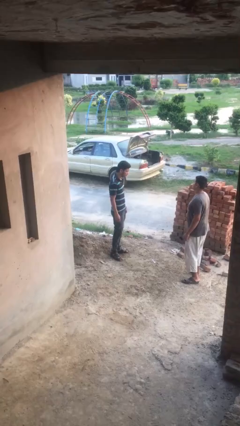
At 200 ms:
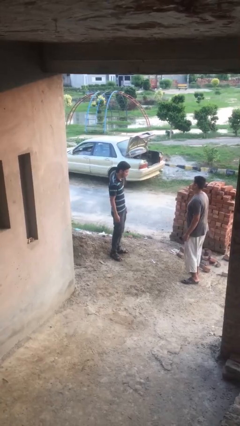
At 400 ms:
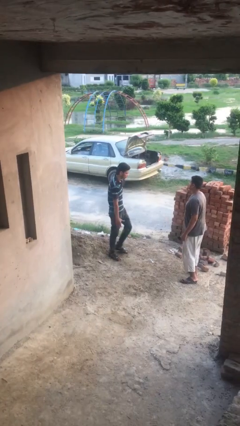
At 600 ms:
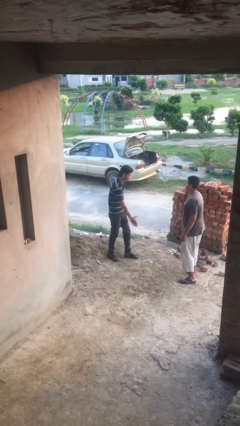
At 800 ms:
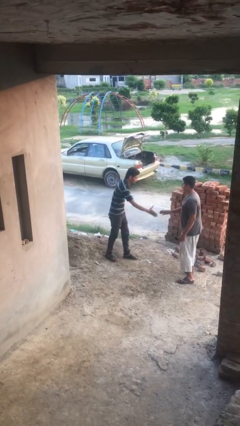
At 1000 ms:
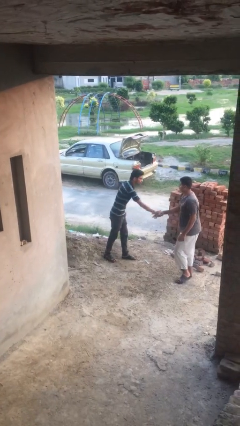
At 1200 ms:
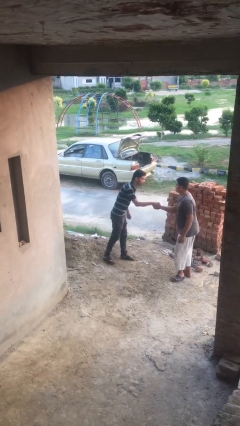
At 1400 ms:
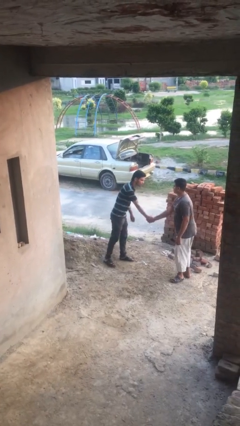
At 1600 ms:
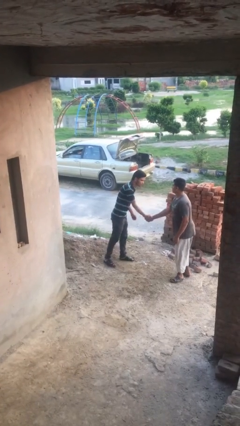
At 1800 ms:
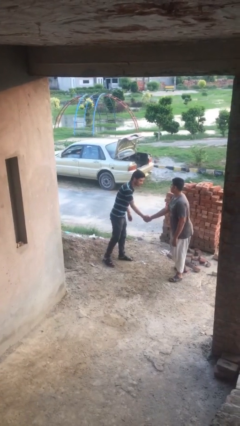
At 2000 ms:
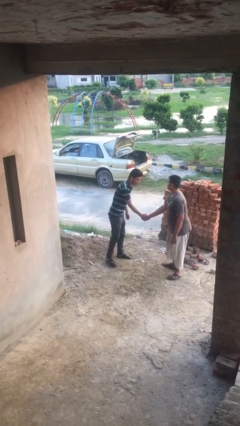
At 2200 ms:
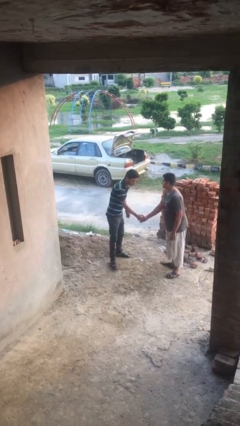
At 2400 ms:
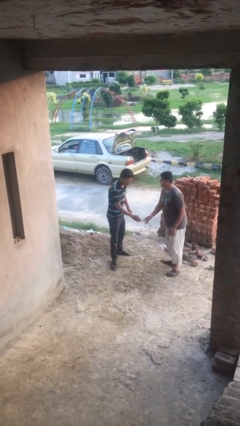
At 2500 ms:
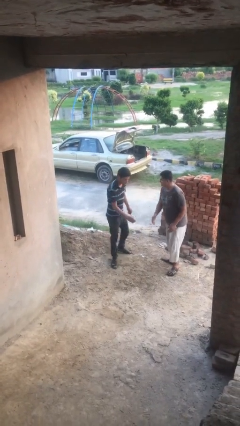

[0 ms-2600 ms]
person shakes hand

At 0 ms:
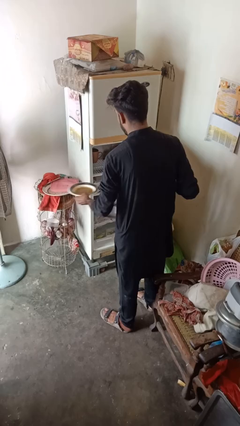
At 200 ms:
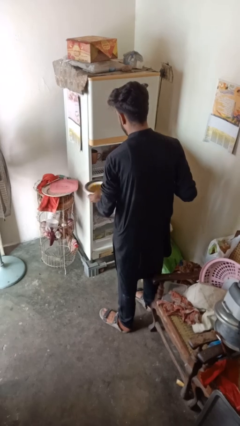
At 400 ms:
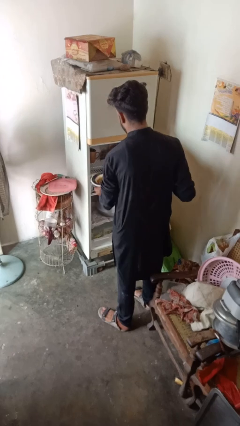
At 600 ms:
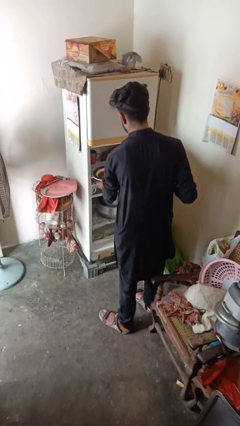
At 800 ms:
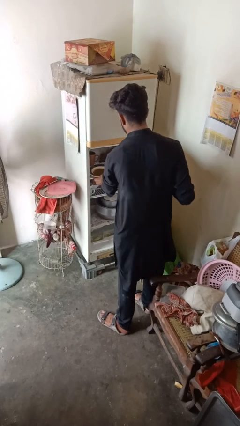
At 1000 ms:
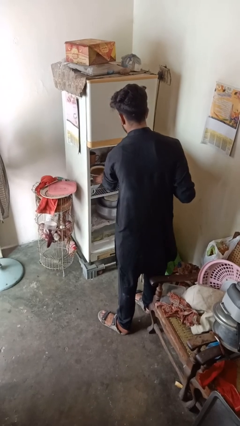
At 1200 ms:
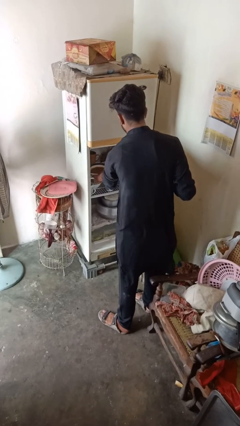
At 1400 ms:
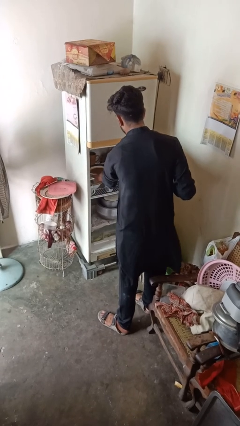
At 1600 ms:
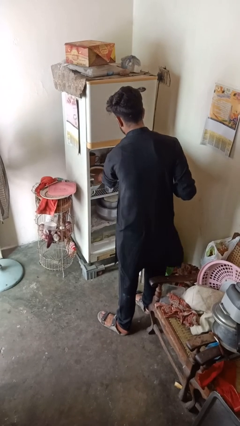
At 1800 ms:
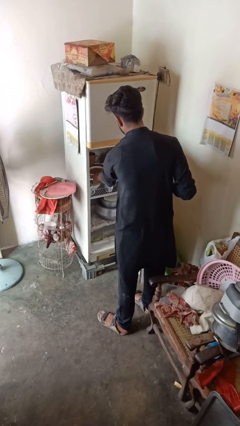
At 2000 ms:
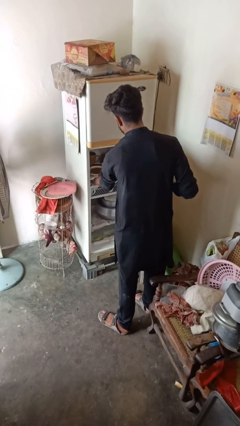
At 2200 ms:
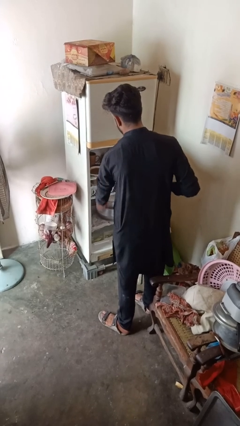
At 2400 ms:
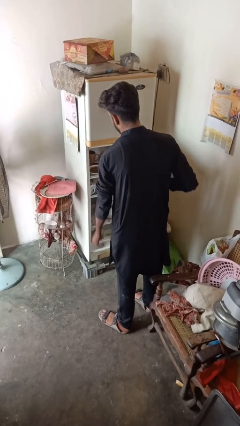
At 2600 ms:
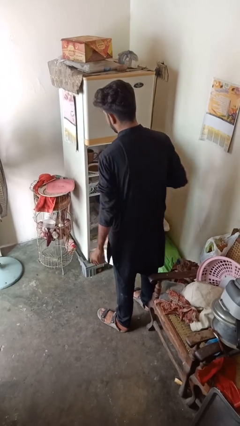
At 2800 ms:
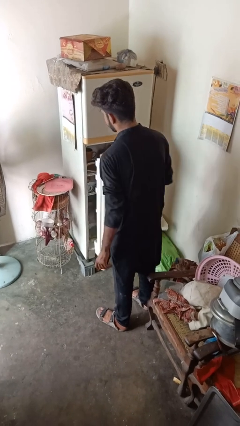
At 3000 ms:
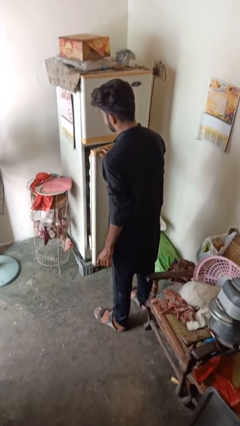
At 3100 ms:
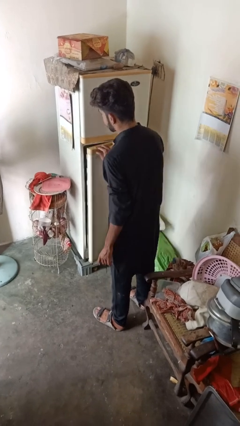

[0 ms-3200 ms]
person puts object into refrigerator

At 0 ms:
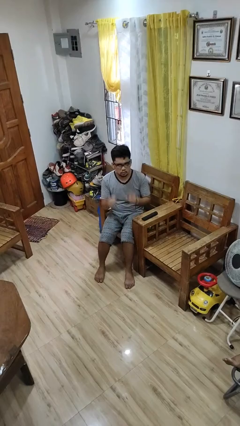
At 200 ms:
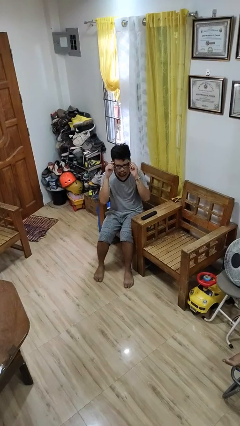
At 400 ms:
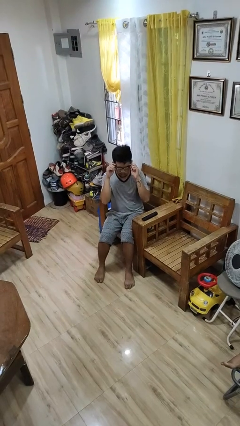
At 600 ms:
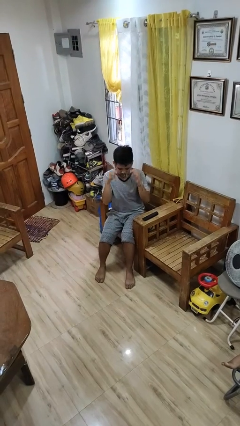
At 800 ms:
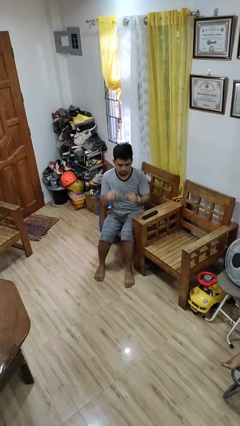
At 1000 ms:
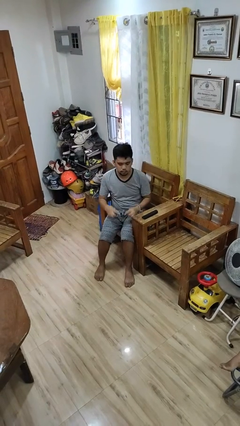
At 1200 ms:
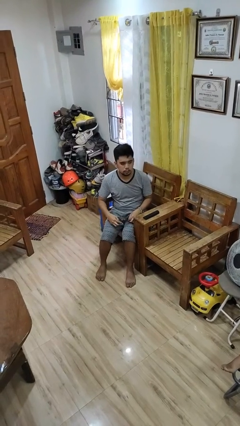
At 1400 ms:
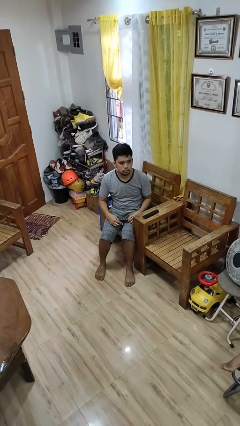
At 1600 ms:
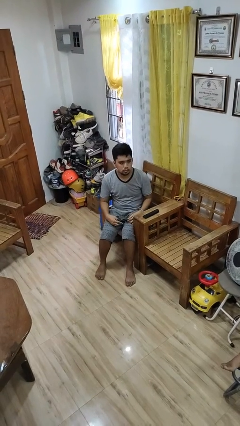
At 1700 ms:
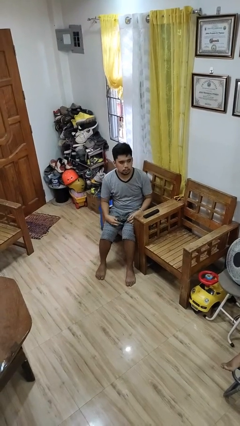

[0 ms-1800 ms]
person takes off glasses

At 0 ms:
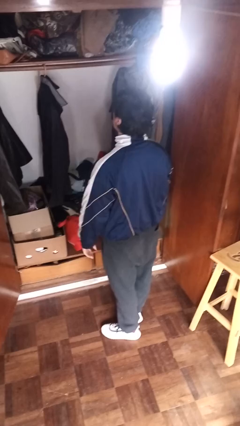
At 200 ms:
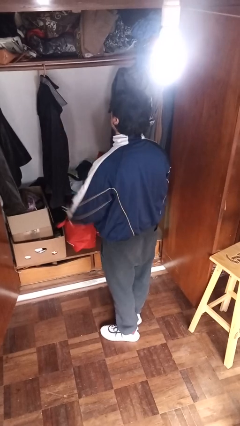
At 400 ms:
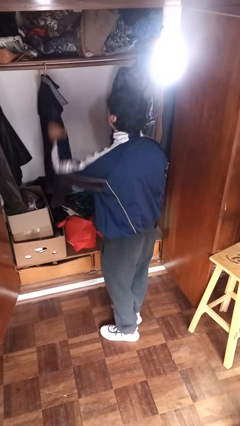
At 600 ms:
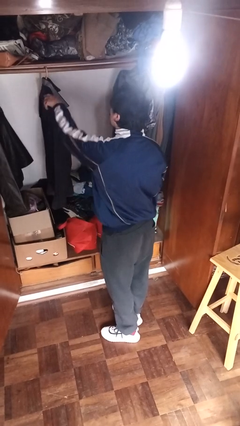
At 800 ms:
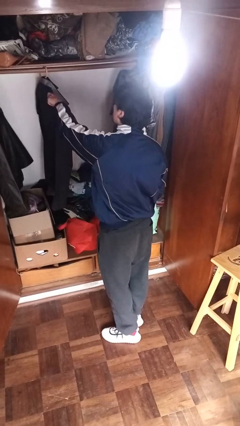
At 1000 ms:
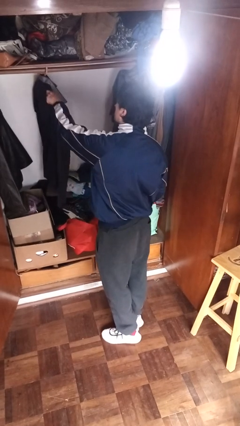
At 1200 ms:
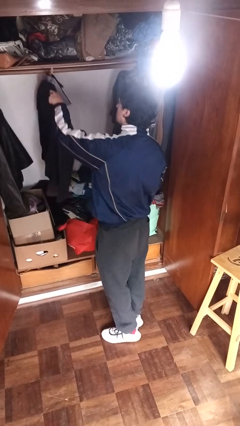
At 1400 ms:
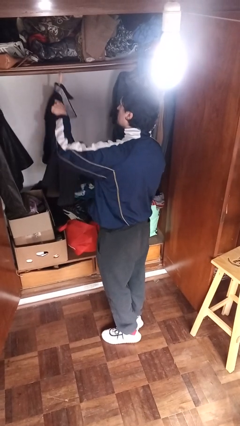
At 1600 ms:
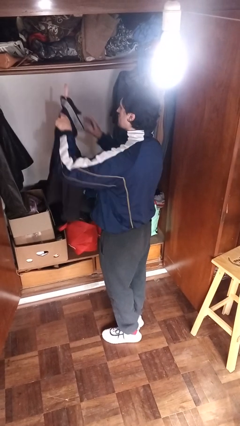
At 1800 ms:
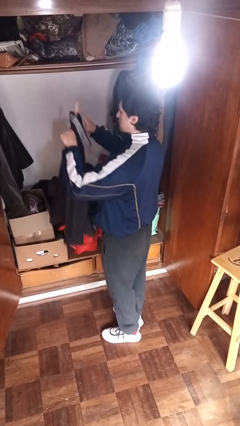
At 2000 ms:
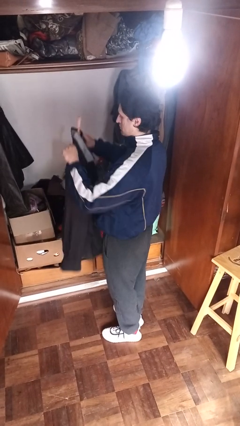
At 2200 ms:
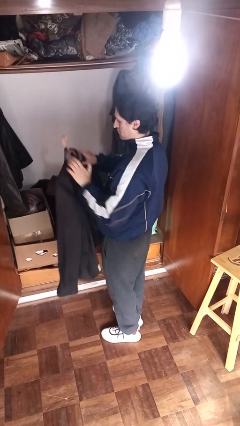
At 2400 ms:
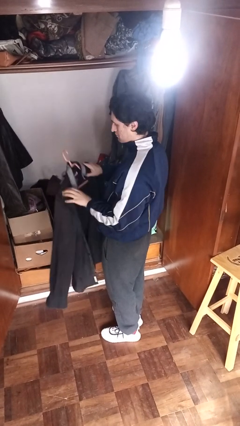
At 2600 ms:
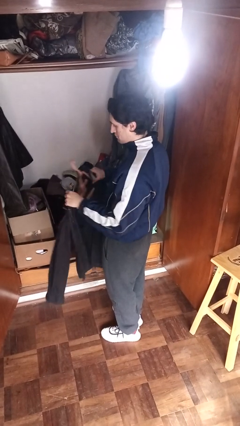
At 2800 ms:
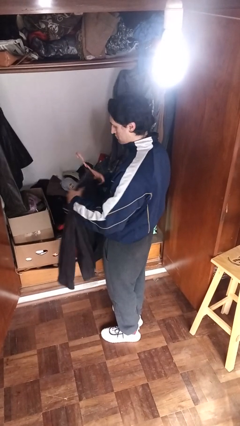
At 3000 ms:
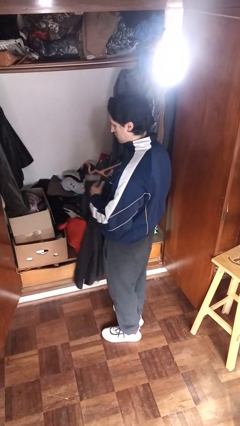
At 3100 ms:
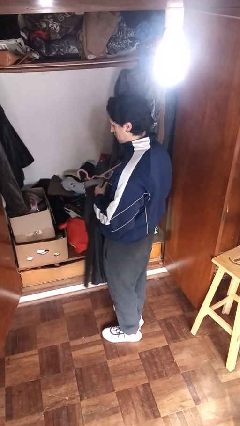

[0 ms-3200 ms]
person takes clothes from closet

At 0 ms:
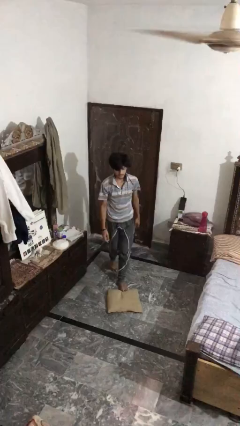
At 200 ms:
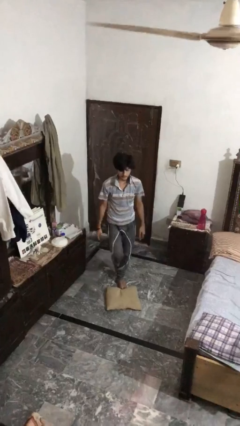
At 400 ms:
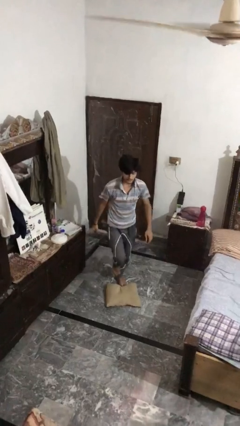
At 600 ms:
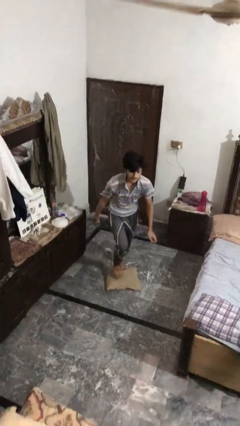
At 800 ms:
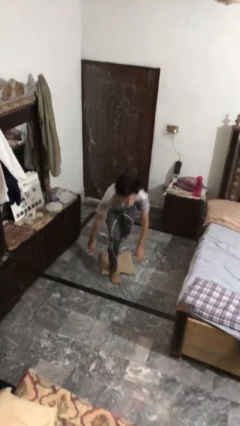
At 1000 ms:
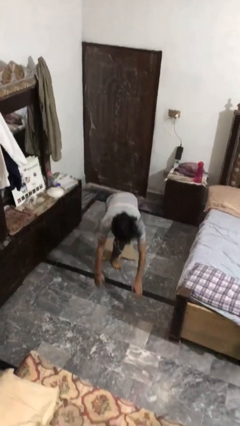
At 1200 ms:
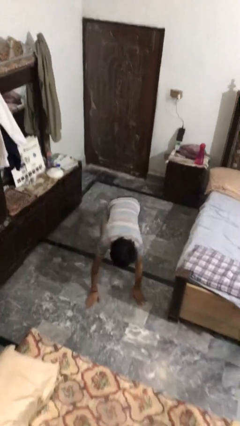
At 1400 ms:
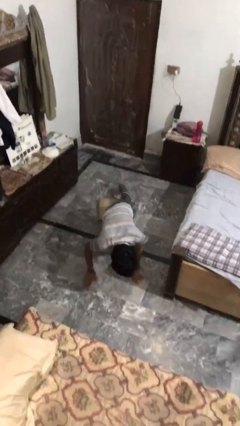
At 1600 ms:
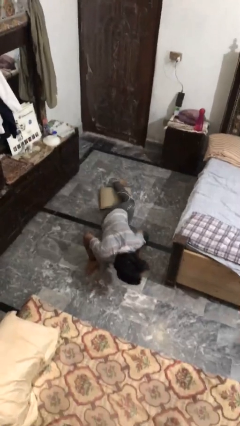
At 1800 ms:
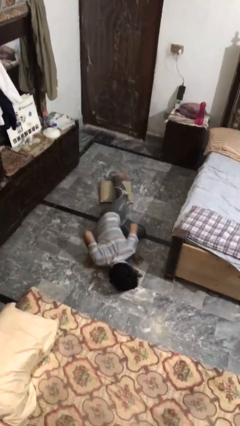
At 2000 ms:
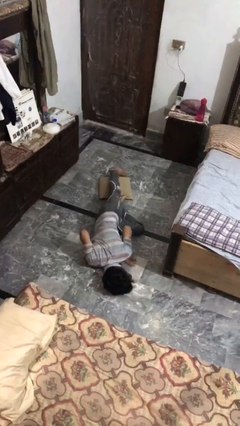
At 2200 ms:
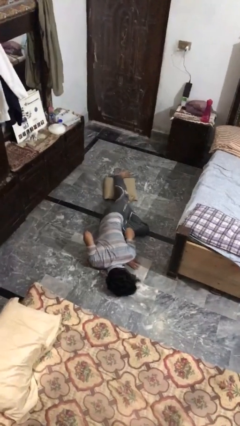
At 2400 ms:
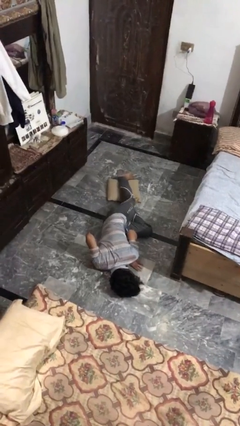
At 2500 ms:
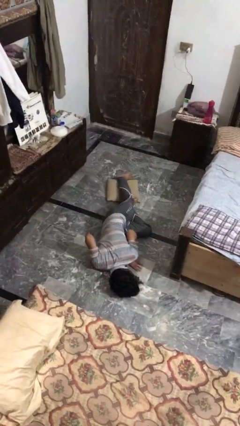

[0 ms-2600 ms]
person trips on object on floor

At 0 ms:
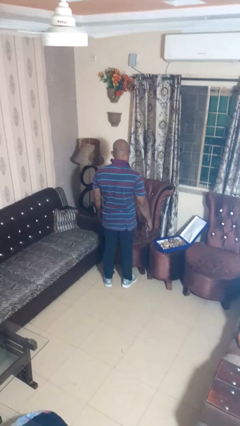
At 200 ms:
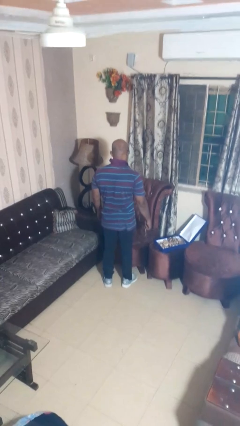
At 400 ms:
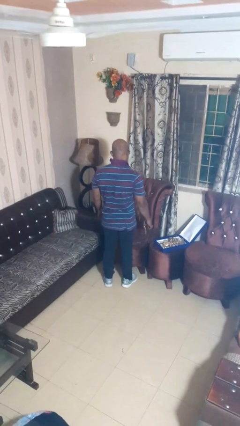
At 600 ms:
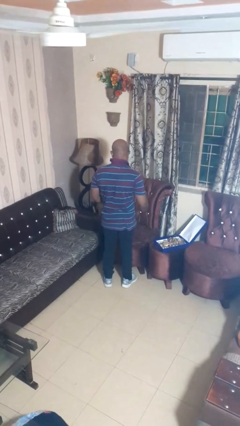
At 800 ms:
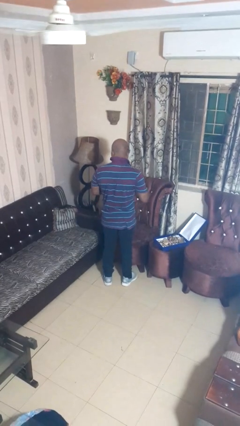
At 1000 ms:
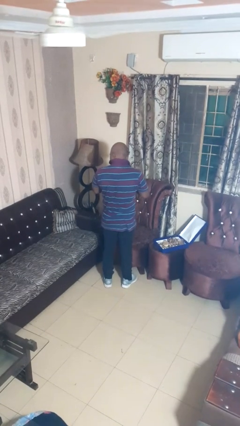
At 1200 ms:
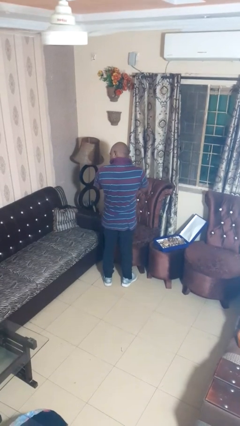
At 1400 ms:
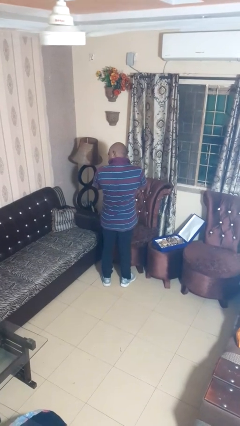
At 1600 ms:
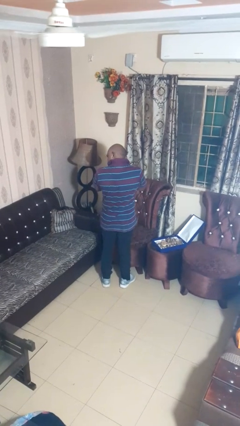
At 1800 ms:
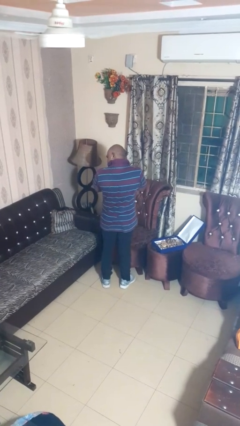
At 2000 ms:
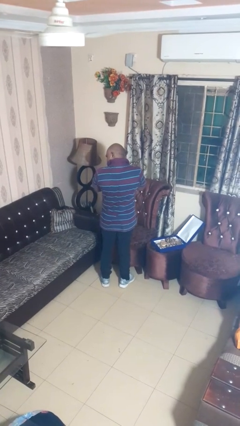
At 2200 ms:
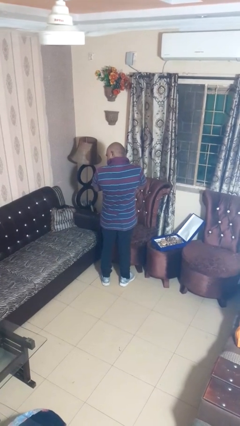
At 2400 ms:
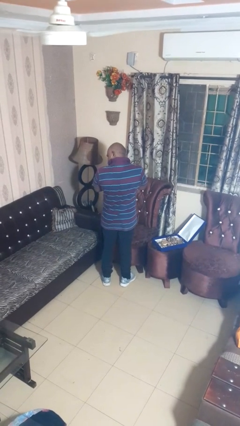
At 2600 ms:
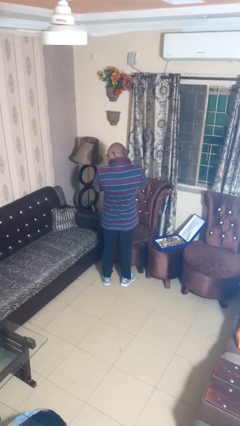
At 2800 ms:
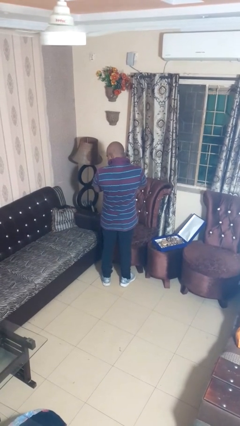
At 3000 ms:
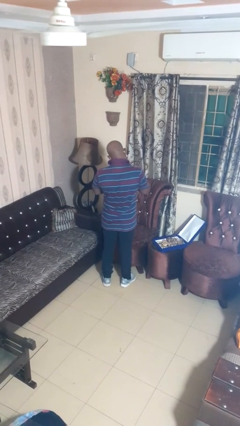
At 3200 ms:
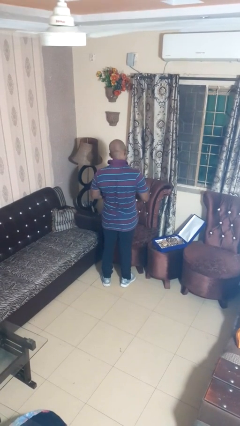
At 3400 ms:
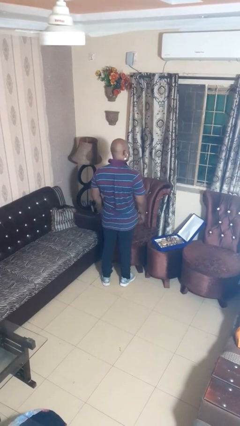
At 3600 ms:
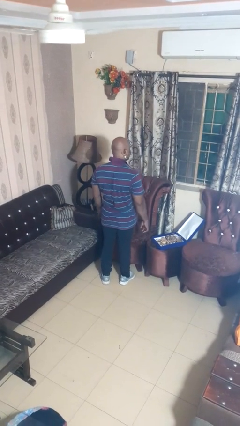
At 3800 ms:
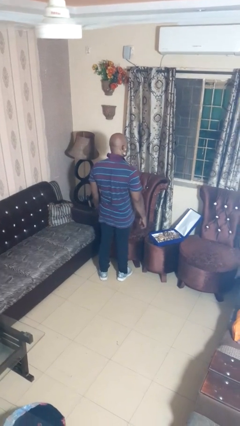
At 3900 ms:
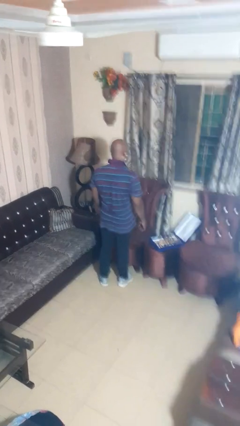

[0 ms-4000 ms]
person puts on earrings
